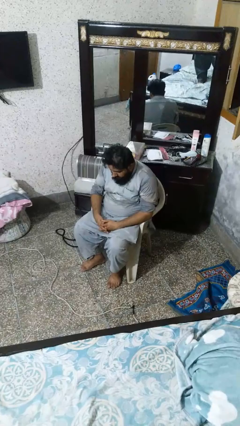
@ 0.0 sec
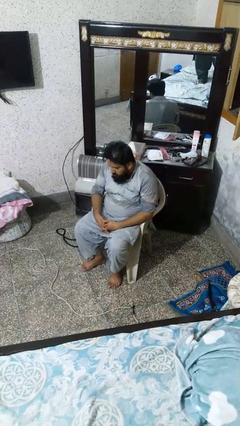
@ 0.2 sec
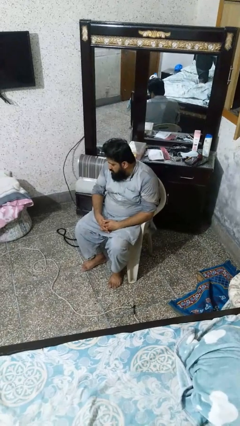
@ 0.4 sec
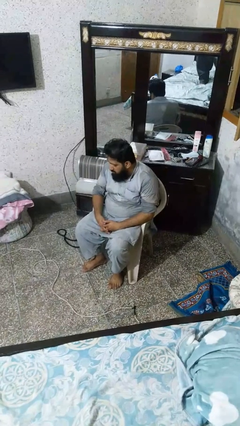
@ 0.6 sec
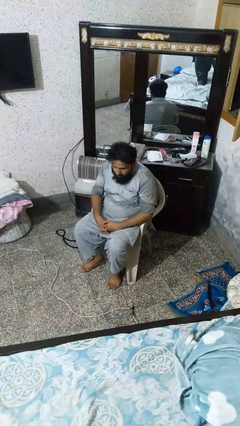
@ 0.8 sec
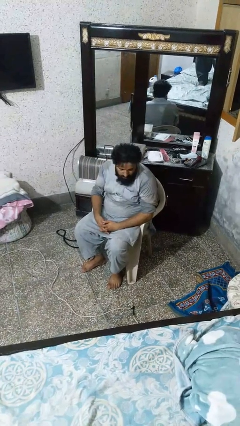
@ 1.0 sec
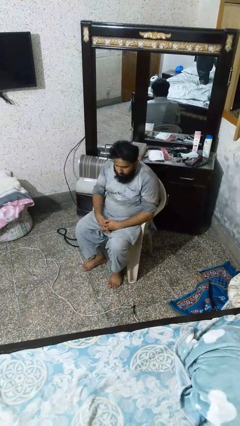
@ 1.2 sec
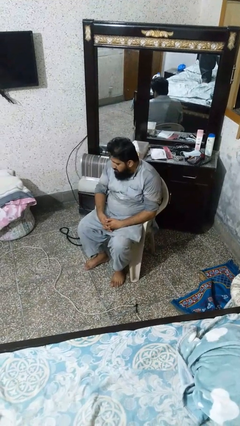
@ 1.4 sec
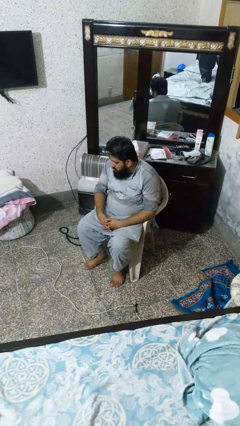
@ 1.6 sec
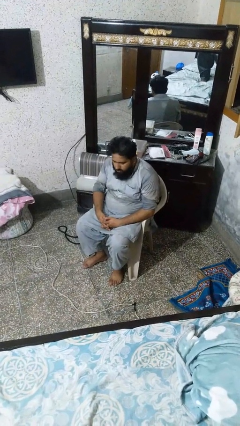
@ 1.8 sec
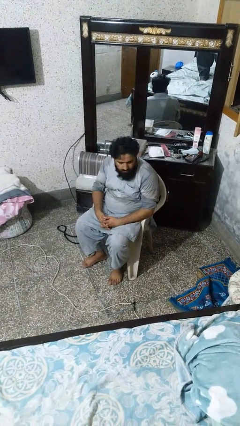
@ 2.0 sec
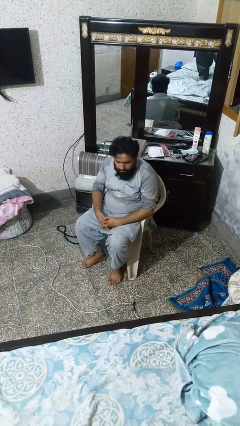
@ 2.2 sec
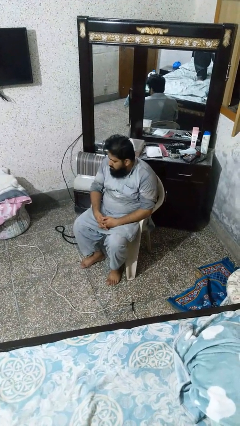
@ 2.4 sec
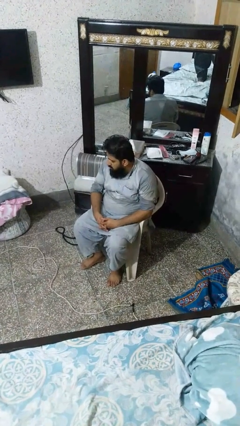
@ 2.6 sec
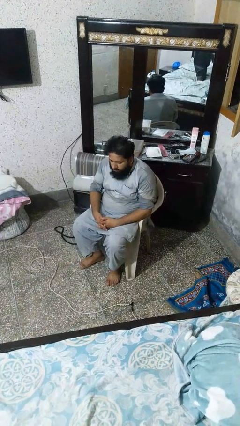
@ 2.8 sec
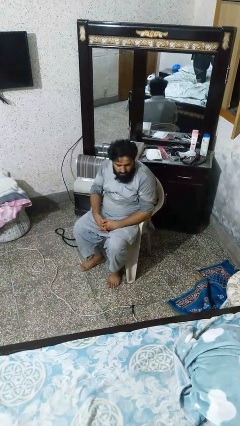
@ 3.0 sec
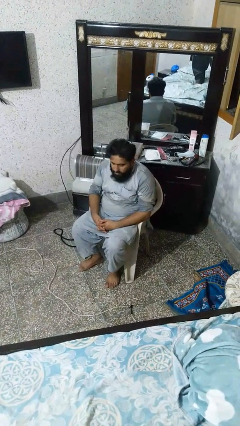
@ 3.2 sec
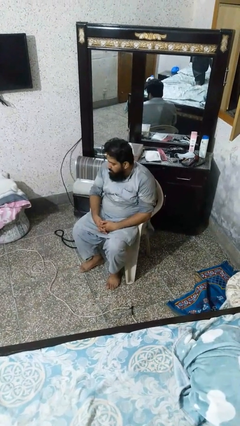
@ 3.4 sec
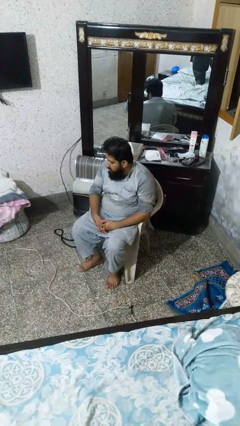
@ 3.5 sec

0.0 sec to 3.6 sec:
person shakes head

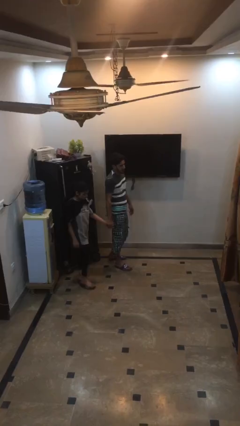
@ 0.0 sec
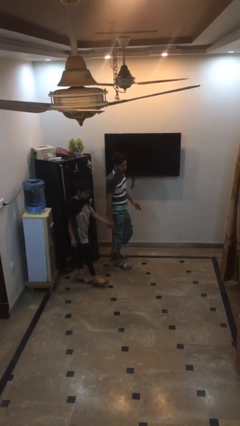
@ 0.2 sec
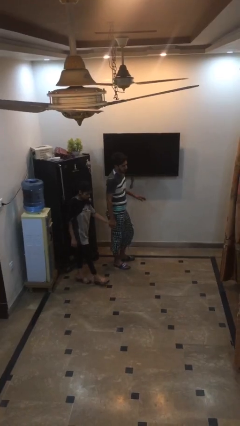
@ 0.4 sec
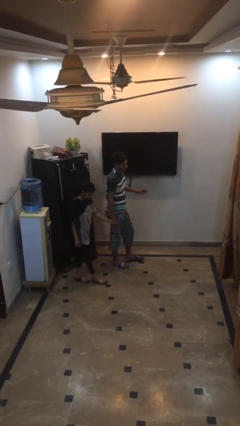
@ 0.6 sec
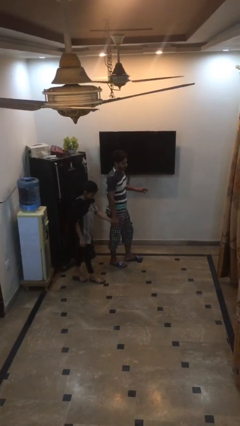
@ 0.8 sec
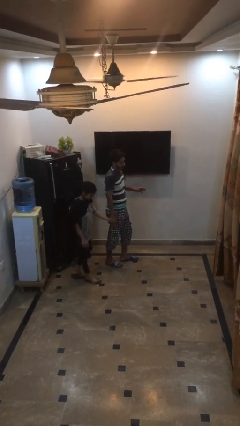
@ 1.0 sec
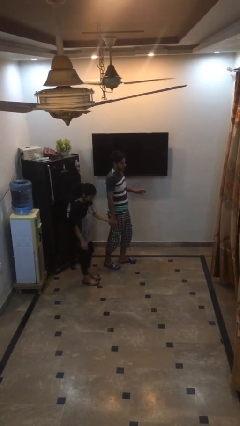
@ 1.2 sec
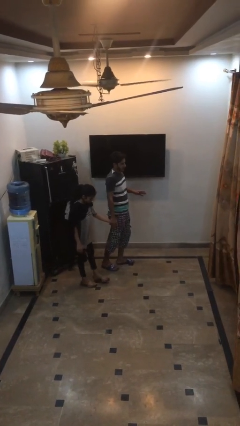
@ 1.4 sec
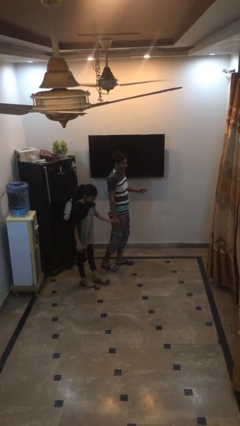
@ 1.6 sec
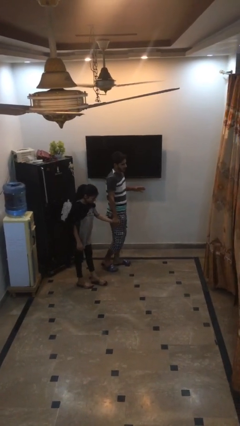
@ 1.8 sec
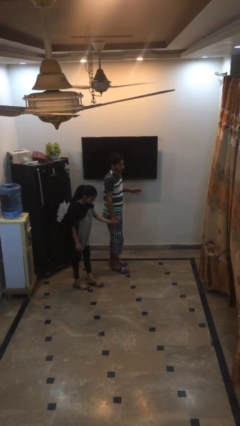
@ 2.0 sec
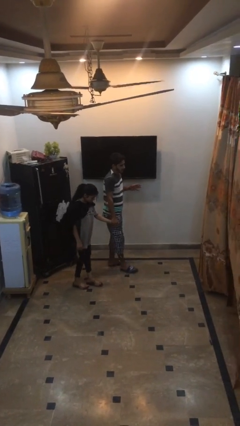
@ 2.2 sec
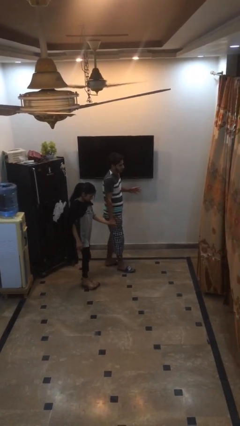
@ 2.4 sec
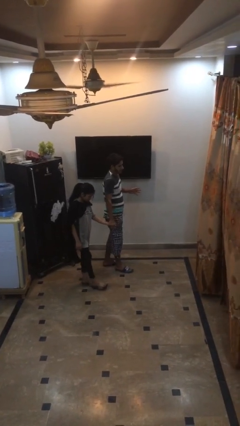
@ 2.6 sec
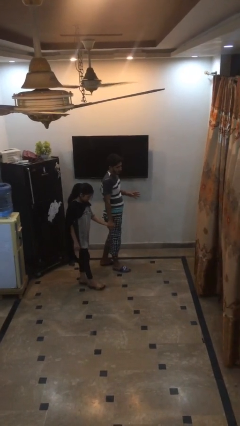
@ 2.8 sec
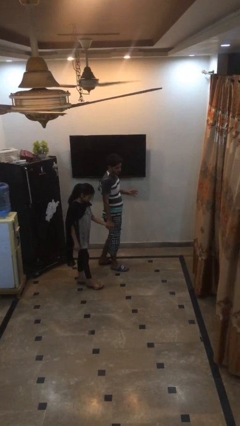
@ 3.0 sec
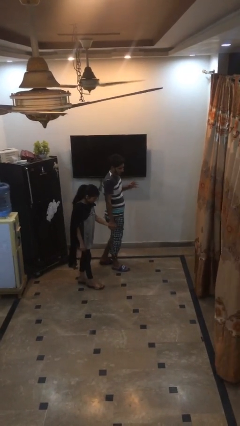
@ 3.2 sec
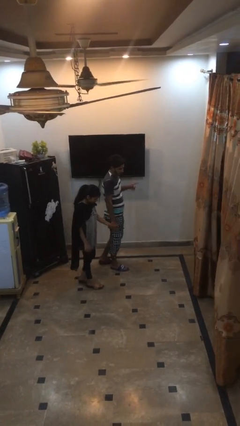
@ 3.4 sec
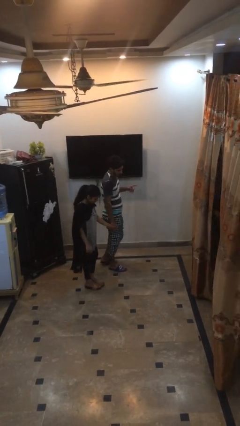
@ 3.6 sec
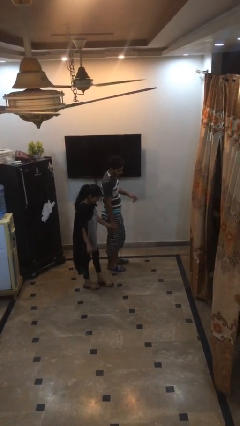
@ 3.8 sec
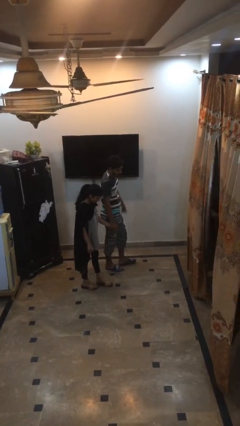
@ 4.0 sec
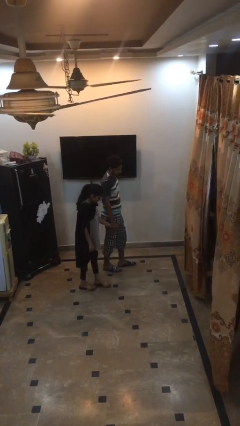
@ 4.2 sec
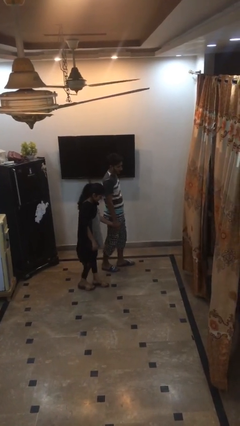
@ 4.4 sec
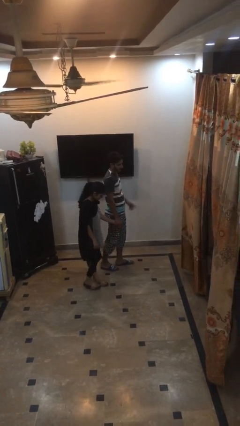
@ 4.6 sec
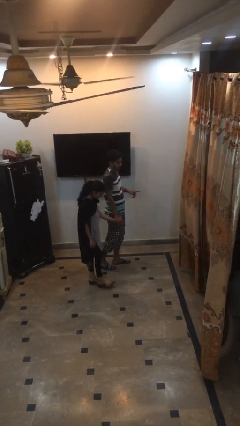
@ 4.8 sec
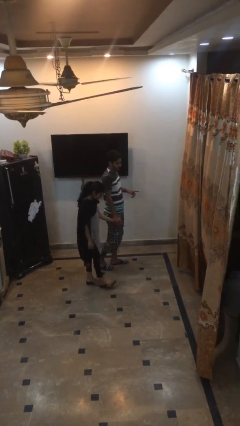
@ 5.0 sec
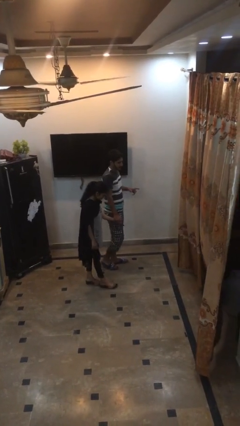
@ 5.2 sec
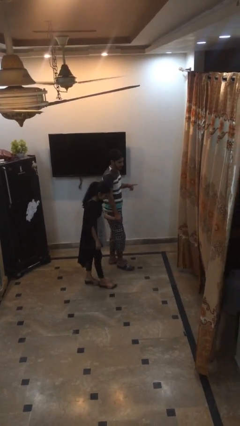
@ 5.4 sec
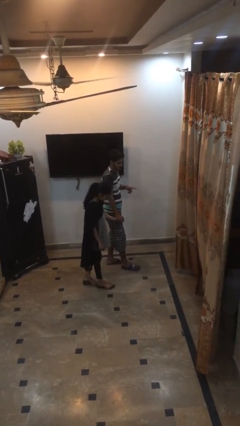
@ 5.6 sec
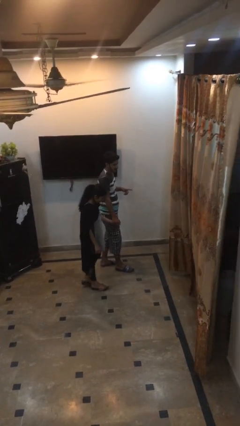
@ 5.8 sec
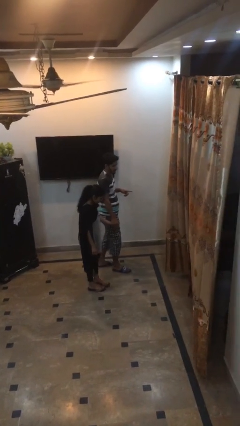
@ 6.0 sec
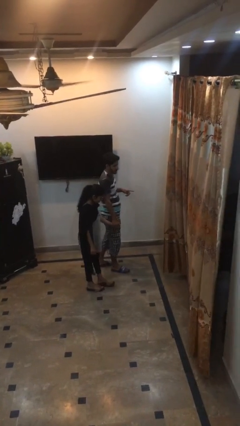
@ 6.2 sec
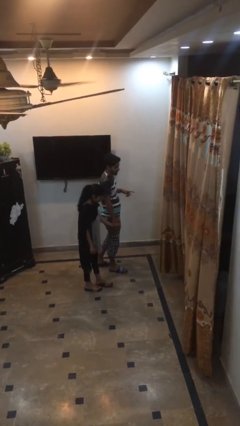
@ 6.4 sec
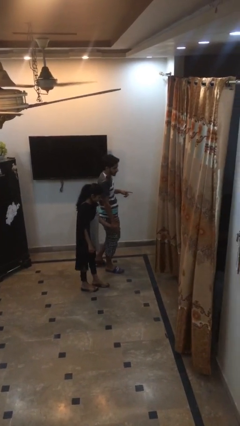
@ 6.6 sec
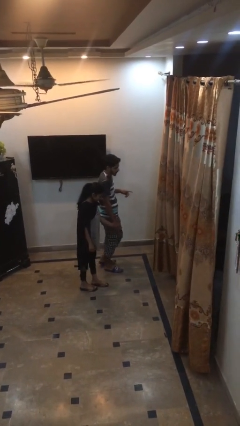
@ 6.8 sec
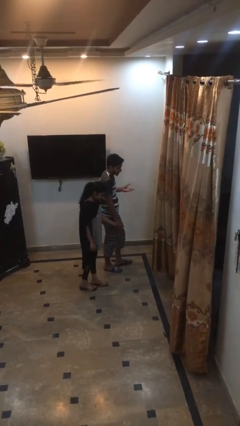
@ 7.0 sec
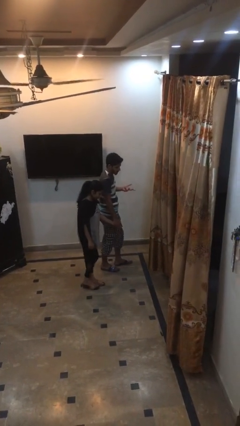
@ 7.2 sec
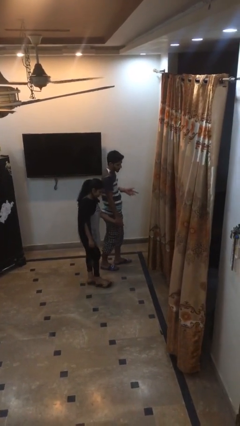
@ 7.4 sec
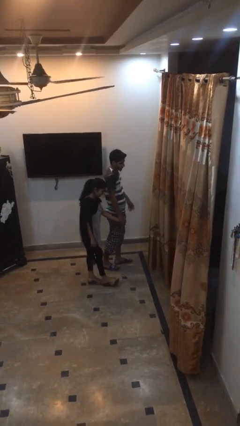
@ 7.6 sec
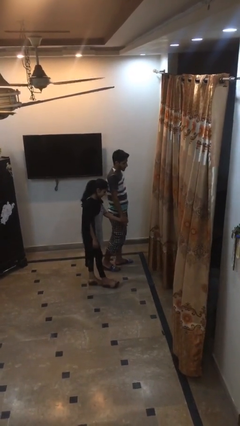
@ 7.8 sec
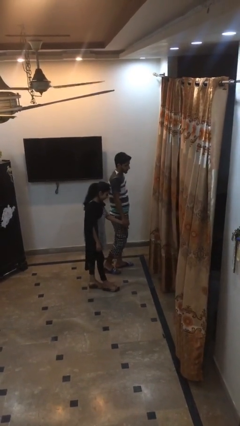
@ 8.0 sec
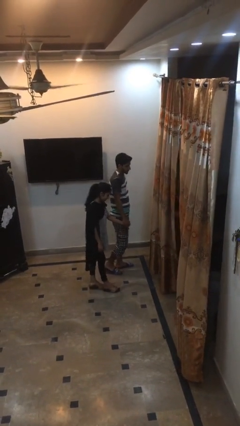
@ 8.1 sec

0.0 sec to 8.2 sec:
person holds hand

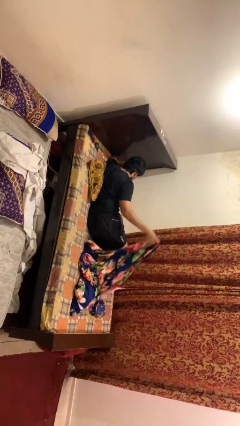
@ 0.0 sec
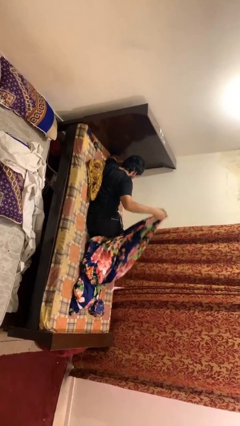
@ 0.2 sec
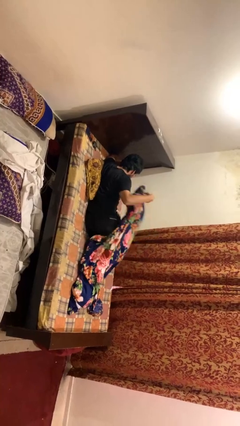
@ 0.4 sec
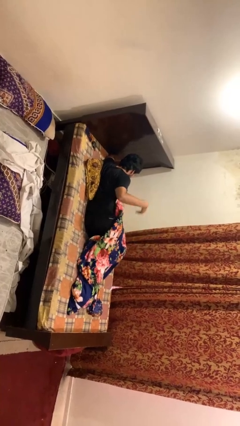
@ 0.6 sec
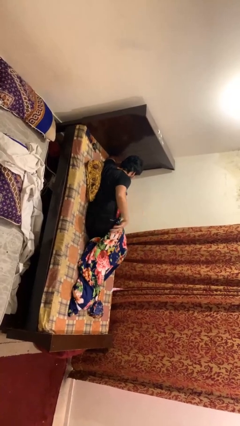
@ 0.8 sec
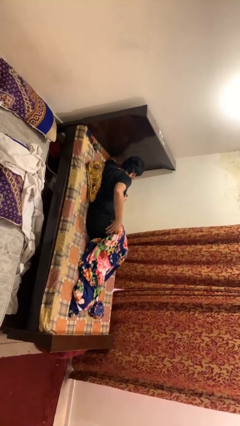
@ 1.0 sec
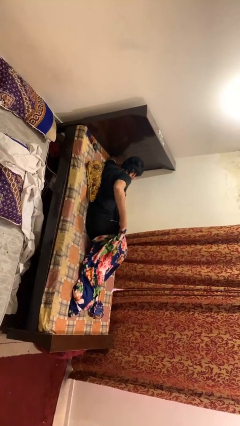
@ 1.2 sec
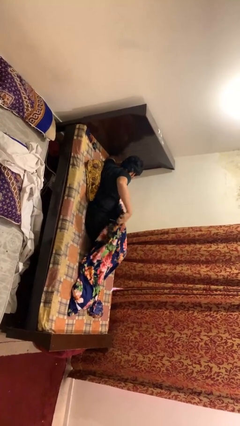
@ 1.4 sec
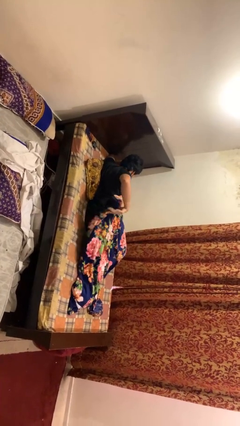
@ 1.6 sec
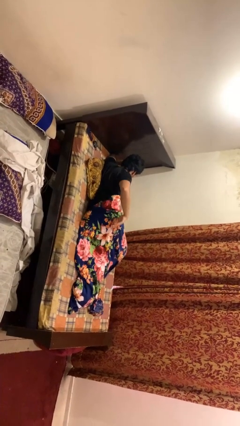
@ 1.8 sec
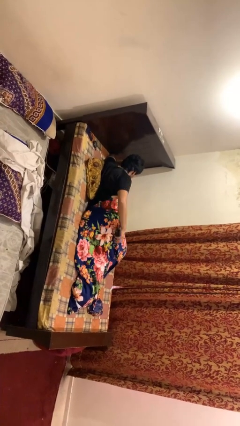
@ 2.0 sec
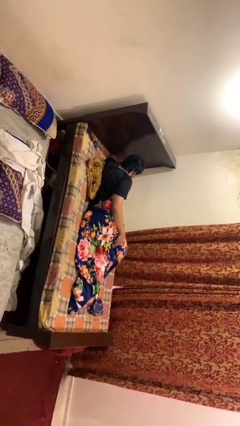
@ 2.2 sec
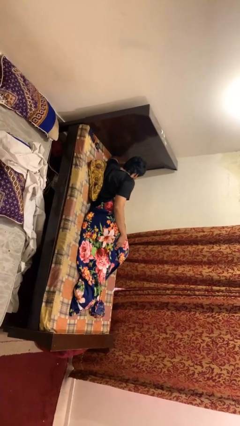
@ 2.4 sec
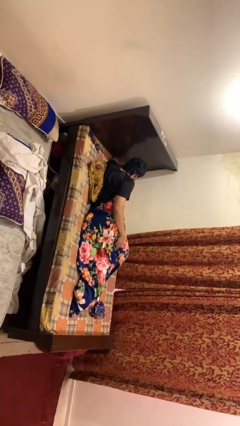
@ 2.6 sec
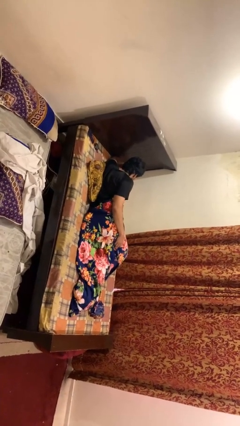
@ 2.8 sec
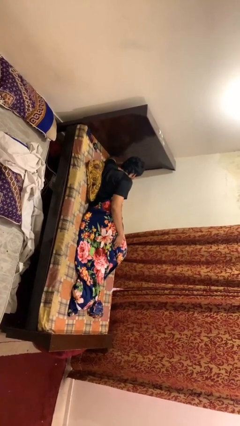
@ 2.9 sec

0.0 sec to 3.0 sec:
person covers with blanket

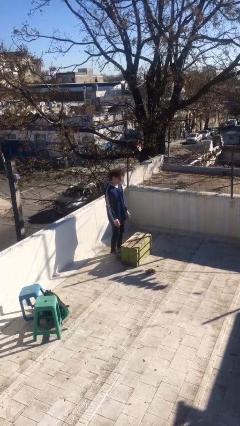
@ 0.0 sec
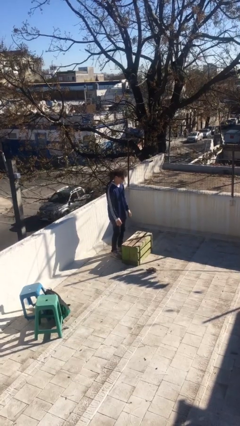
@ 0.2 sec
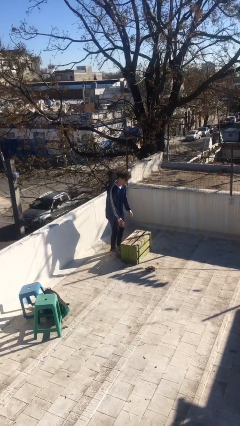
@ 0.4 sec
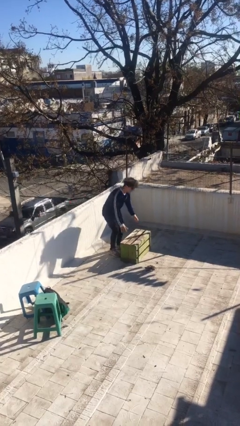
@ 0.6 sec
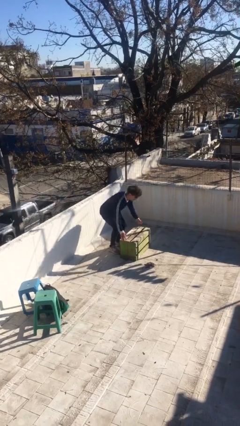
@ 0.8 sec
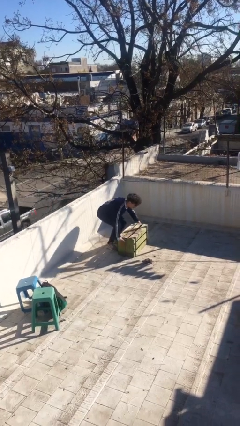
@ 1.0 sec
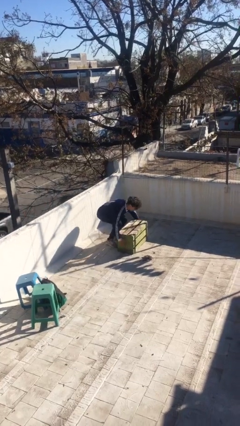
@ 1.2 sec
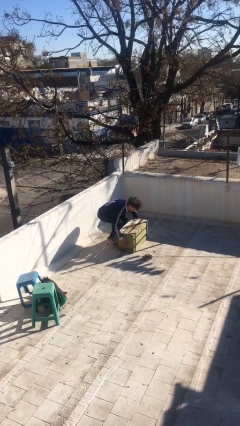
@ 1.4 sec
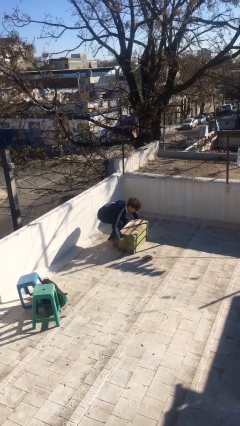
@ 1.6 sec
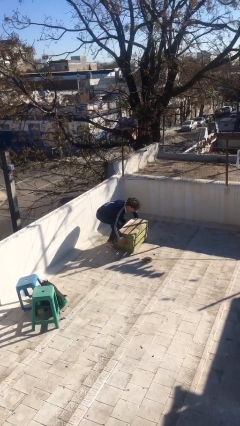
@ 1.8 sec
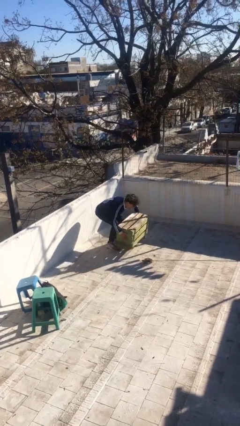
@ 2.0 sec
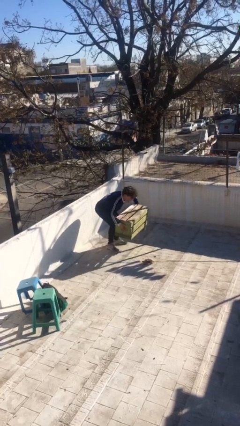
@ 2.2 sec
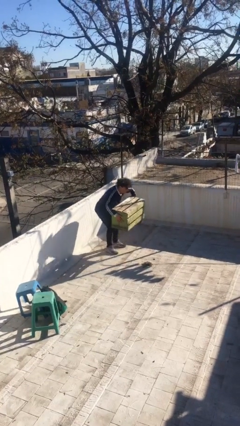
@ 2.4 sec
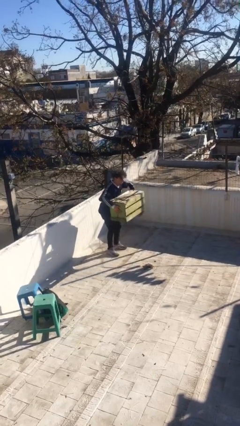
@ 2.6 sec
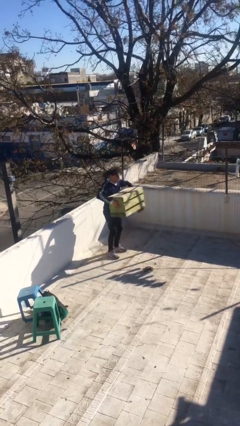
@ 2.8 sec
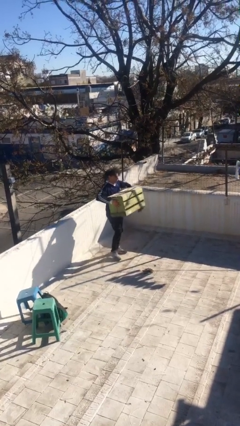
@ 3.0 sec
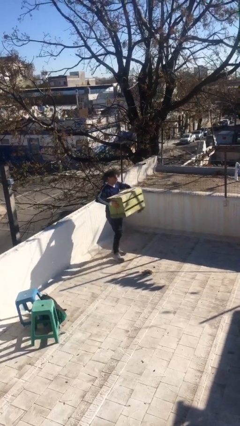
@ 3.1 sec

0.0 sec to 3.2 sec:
person picks up object from floor
